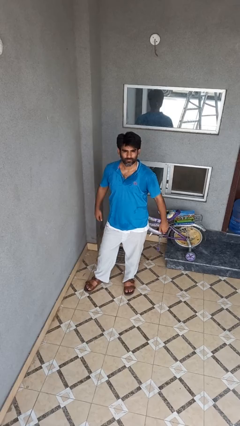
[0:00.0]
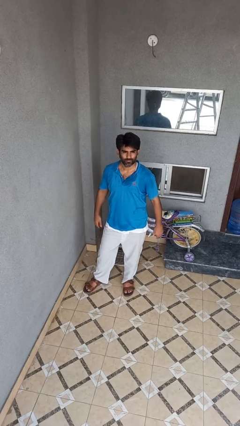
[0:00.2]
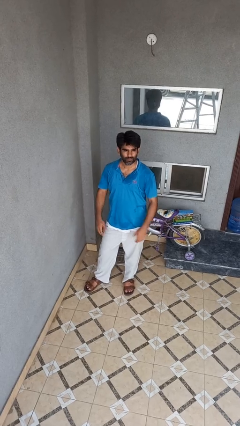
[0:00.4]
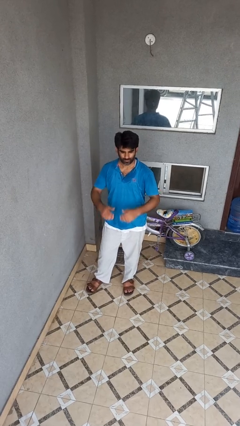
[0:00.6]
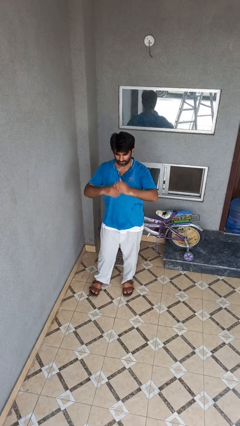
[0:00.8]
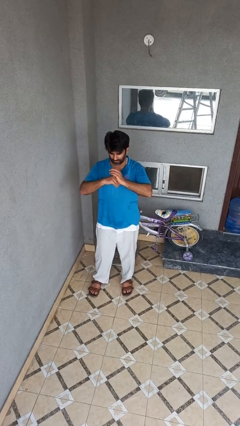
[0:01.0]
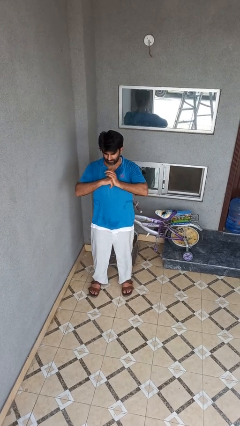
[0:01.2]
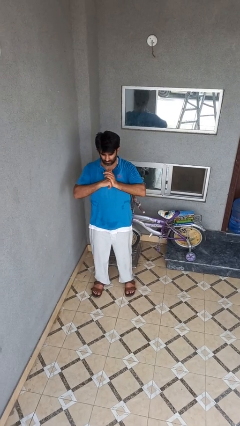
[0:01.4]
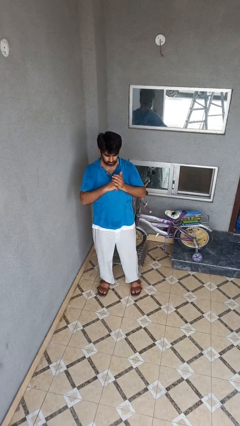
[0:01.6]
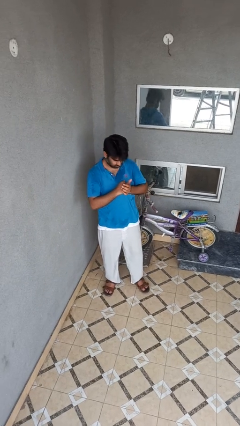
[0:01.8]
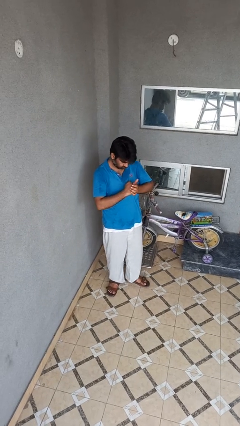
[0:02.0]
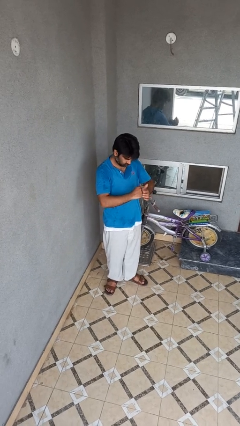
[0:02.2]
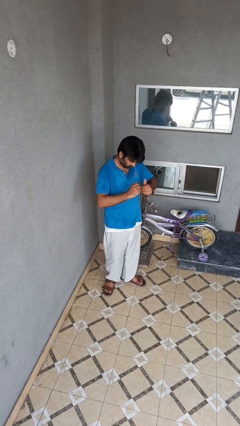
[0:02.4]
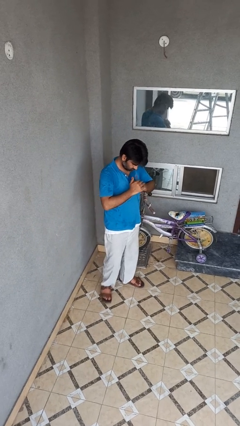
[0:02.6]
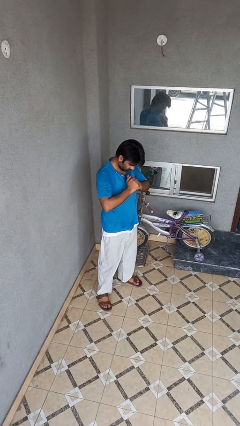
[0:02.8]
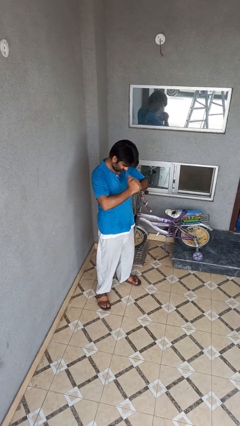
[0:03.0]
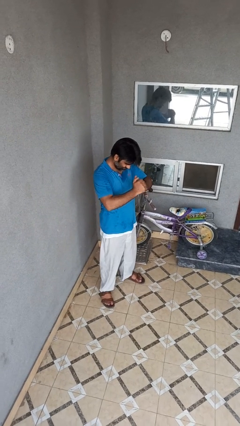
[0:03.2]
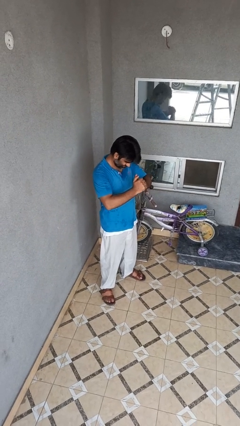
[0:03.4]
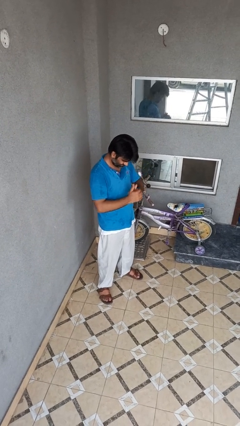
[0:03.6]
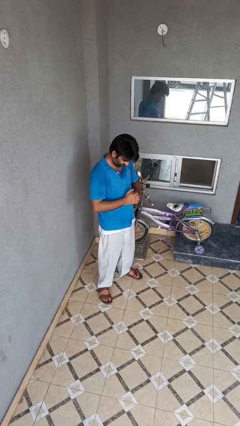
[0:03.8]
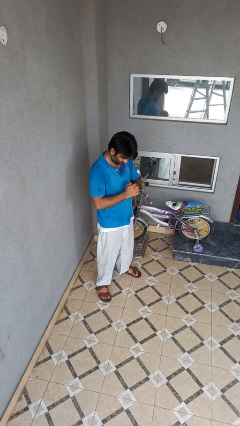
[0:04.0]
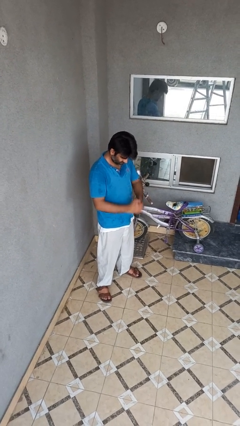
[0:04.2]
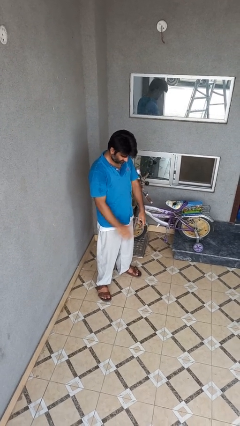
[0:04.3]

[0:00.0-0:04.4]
person cracks knuckles

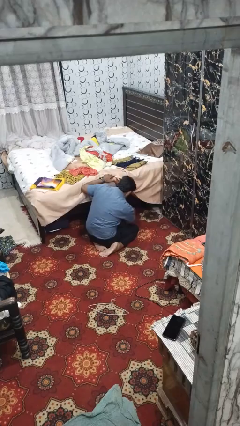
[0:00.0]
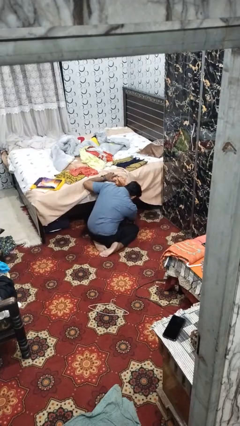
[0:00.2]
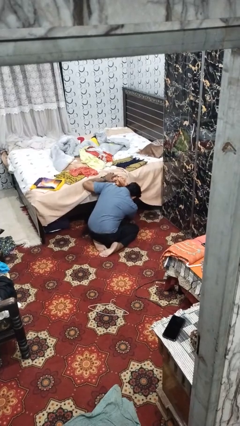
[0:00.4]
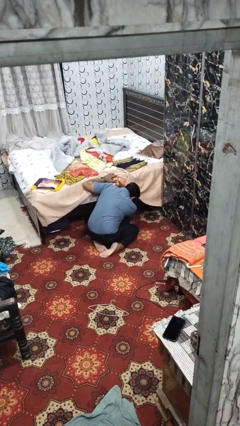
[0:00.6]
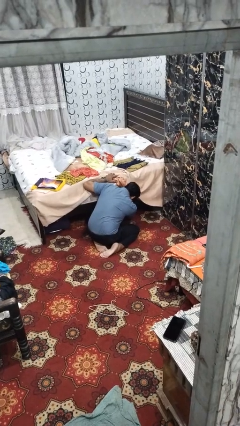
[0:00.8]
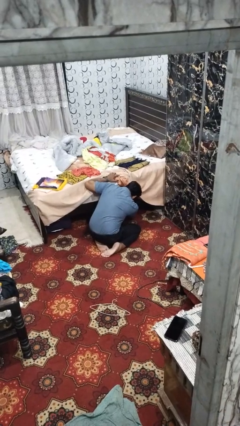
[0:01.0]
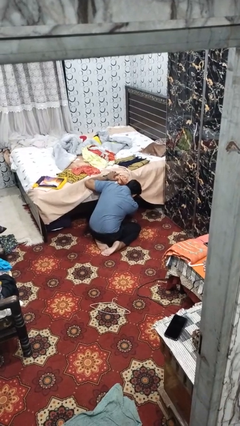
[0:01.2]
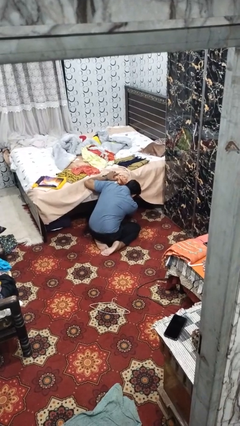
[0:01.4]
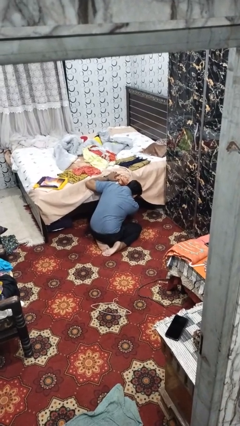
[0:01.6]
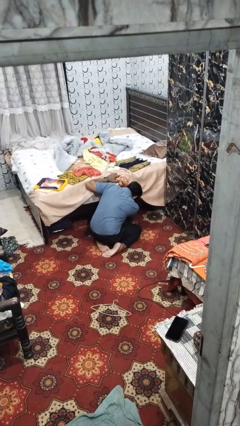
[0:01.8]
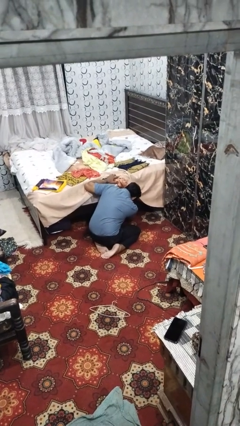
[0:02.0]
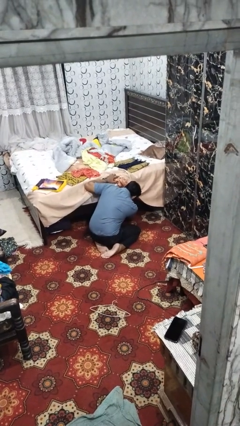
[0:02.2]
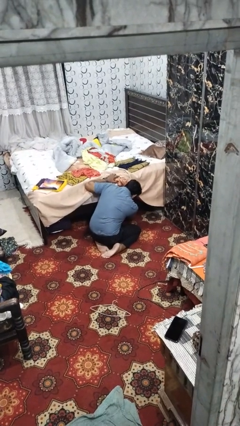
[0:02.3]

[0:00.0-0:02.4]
person searches under bed

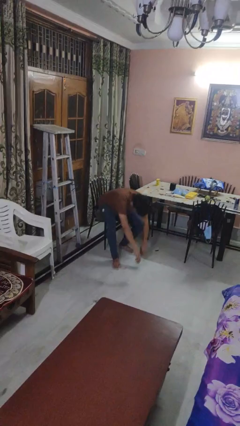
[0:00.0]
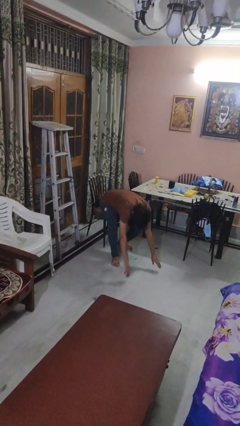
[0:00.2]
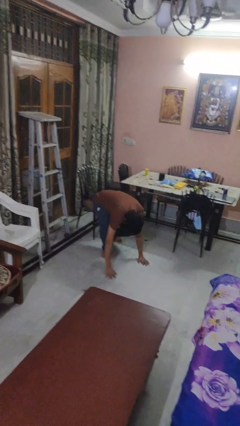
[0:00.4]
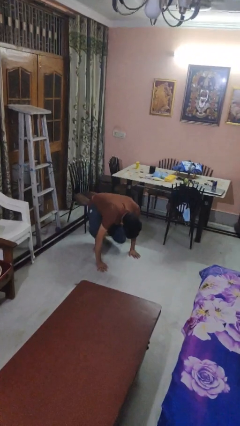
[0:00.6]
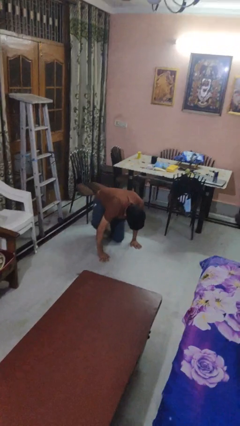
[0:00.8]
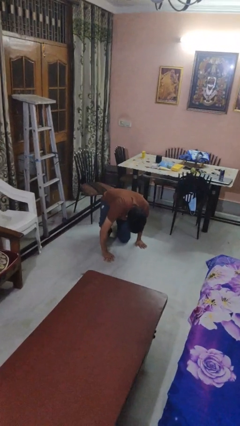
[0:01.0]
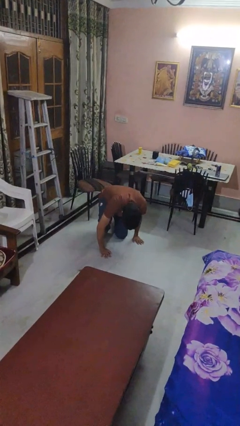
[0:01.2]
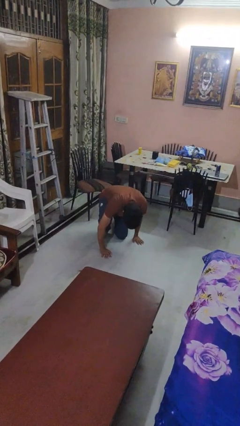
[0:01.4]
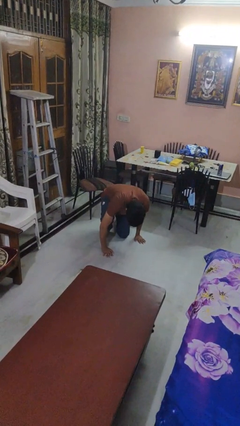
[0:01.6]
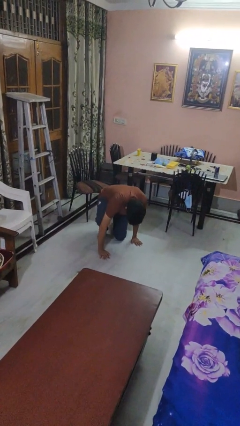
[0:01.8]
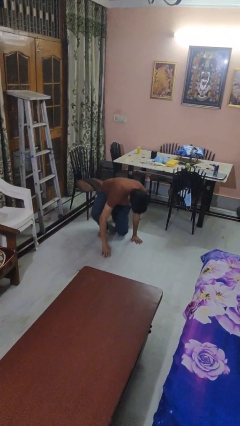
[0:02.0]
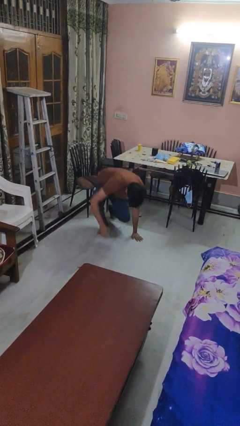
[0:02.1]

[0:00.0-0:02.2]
person falls while standing

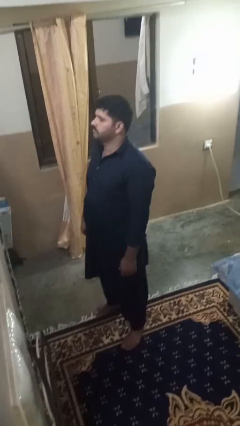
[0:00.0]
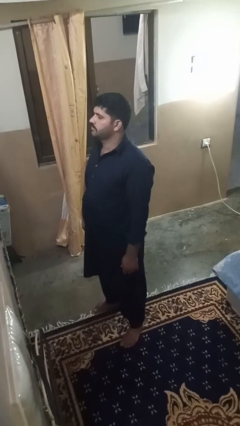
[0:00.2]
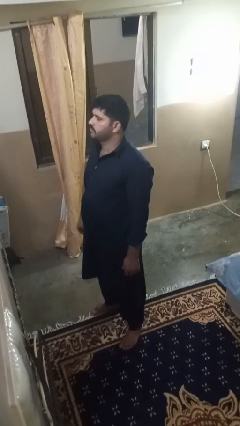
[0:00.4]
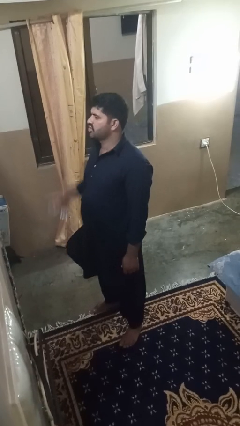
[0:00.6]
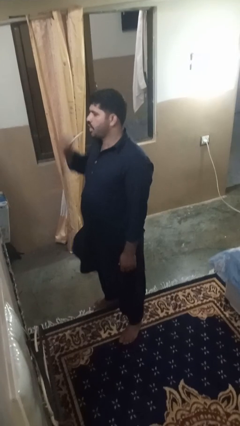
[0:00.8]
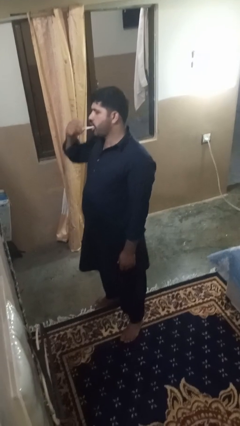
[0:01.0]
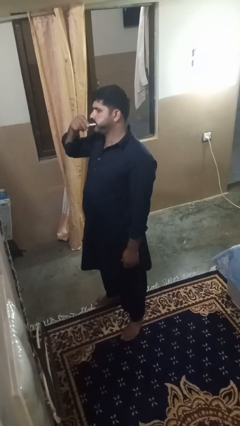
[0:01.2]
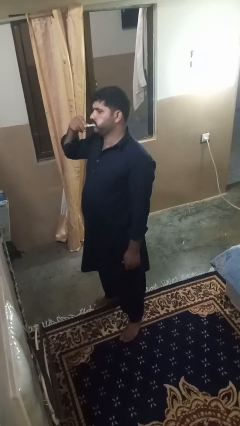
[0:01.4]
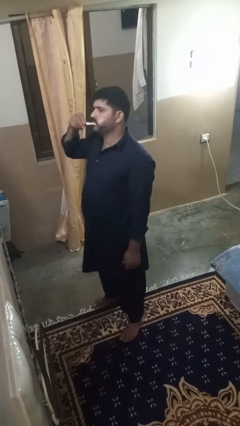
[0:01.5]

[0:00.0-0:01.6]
person brushes teeth

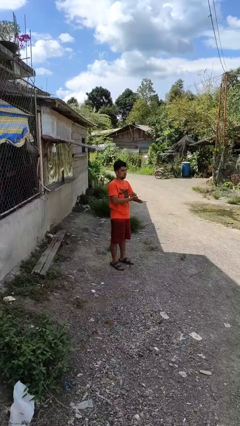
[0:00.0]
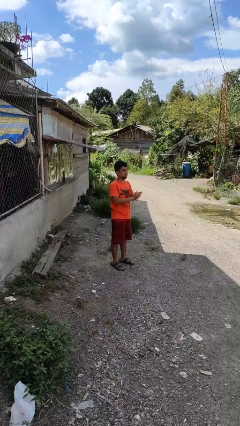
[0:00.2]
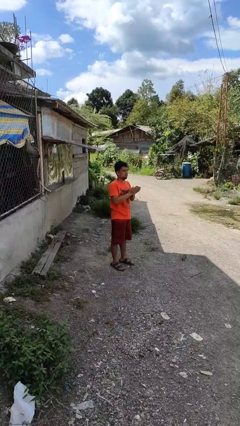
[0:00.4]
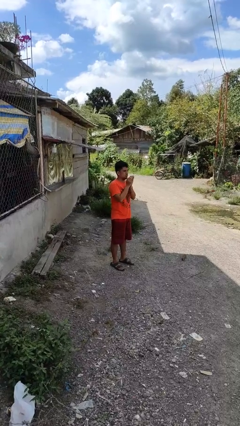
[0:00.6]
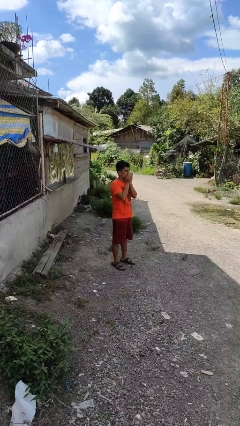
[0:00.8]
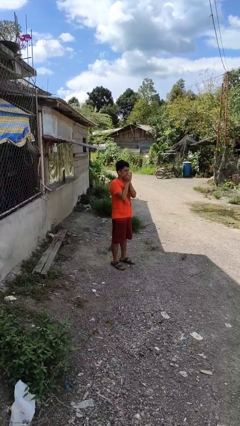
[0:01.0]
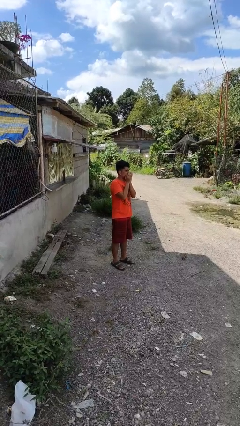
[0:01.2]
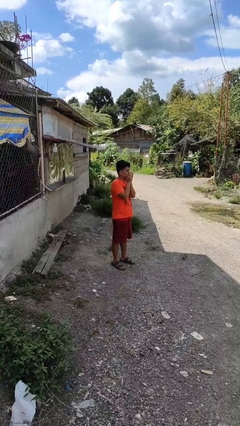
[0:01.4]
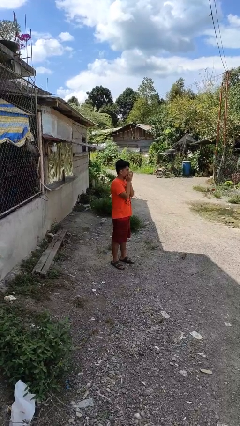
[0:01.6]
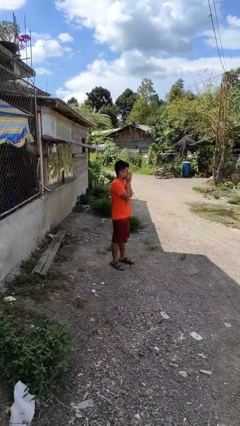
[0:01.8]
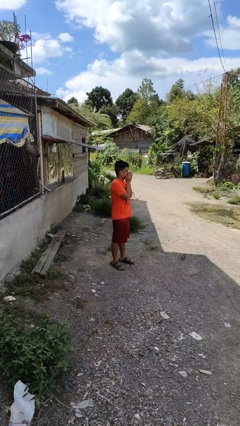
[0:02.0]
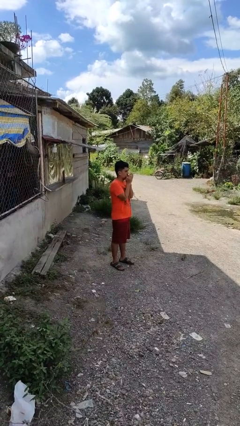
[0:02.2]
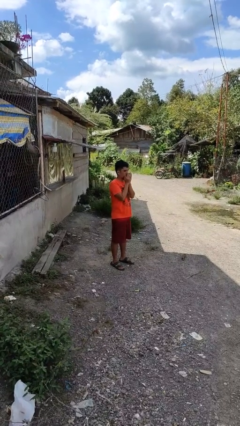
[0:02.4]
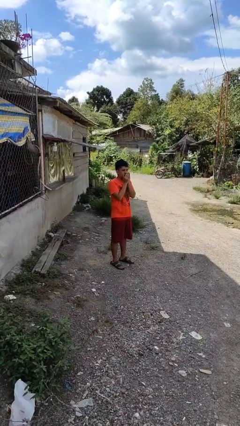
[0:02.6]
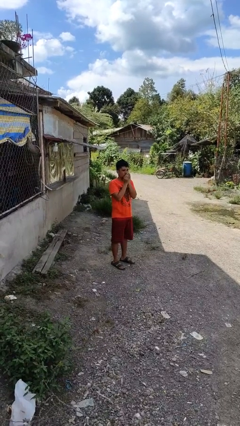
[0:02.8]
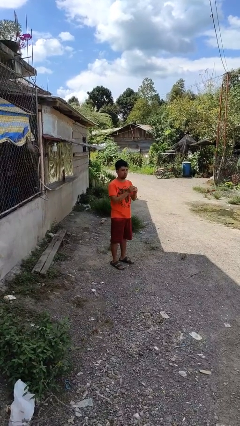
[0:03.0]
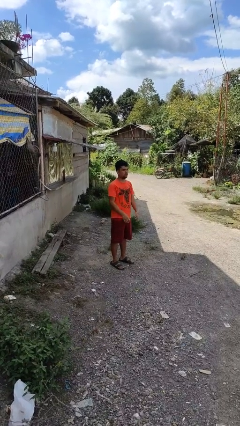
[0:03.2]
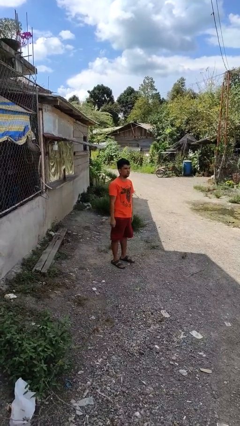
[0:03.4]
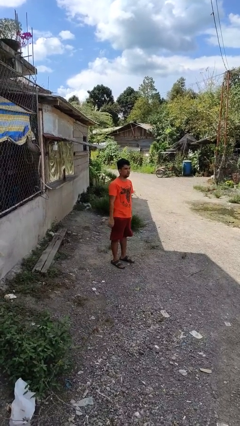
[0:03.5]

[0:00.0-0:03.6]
person blows into hands

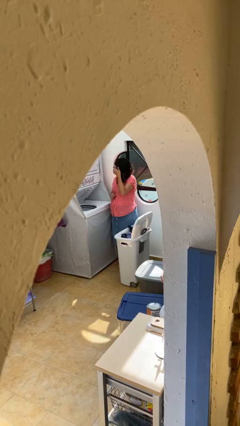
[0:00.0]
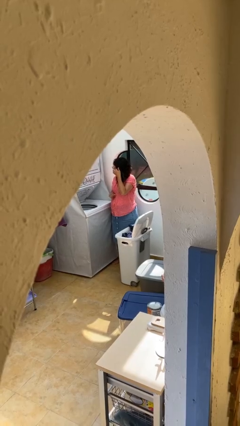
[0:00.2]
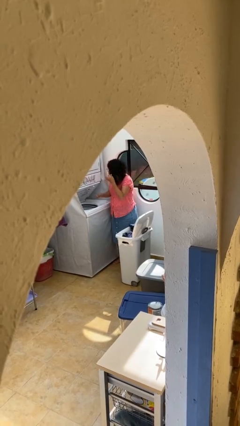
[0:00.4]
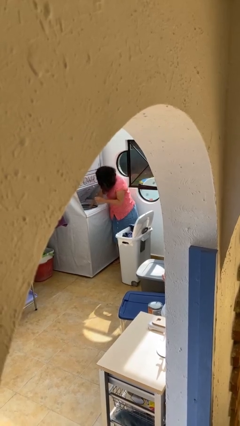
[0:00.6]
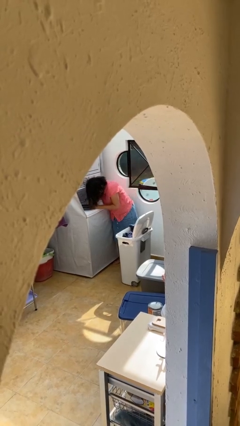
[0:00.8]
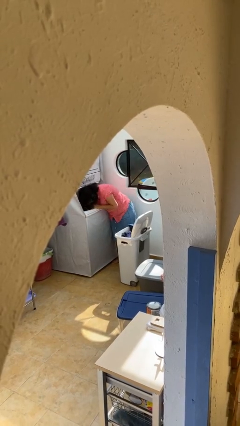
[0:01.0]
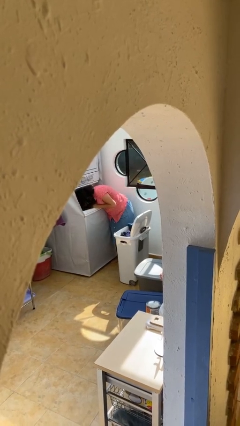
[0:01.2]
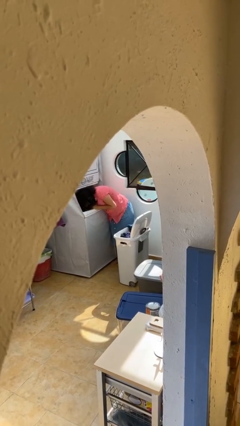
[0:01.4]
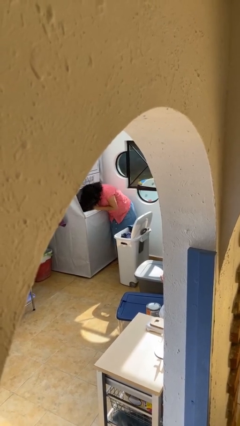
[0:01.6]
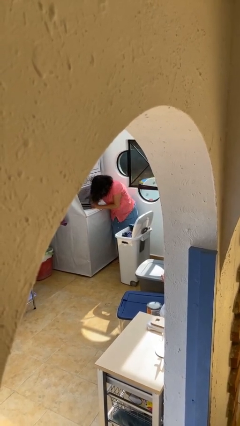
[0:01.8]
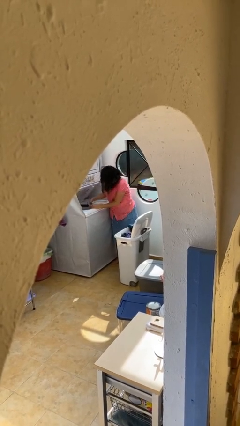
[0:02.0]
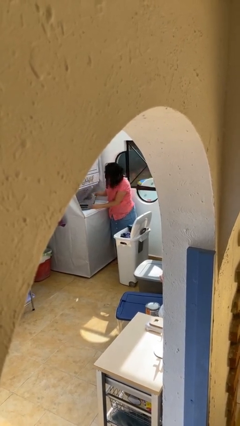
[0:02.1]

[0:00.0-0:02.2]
person loads clotheswasher

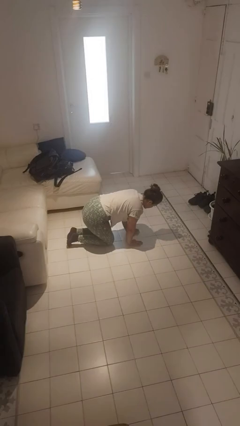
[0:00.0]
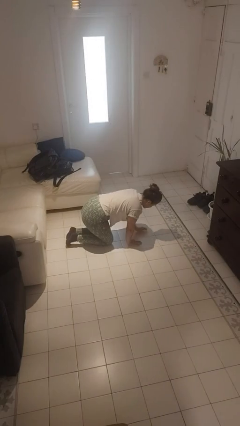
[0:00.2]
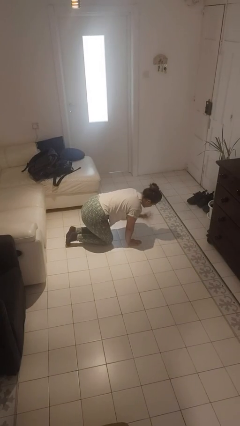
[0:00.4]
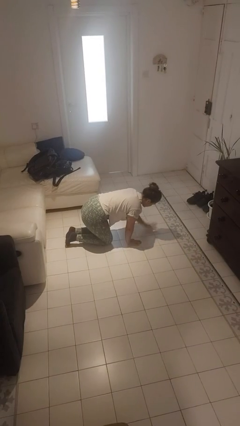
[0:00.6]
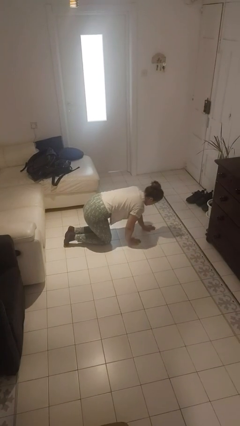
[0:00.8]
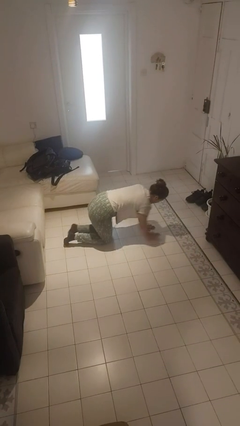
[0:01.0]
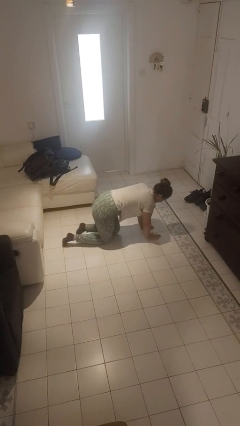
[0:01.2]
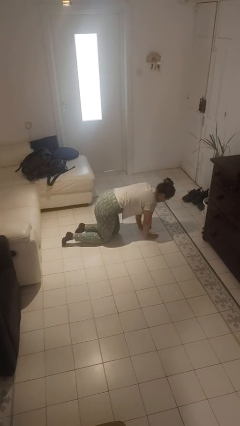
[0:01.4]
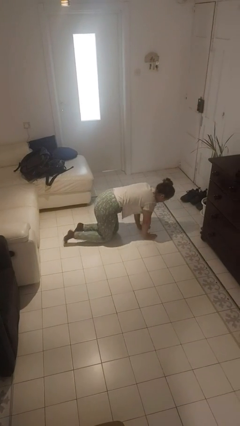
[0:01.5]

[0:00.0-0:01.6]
person crawls
